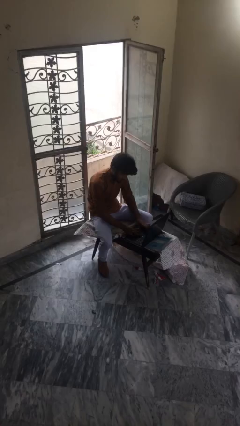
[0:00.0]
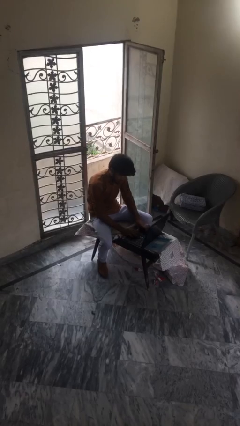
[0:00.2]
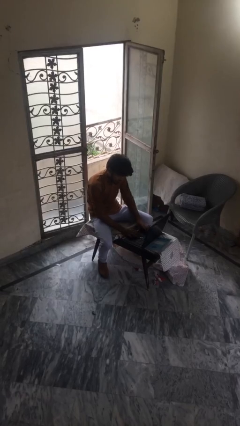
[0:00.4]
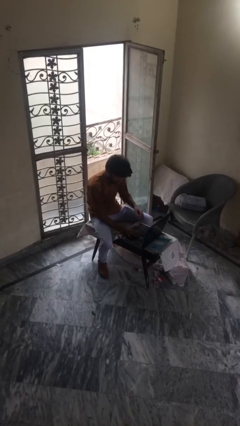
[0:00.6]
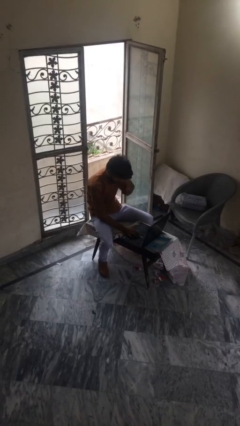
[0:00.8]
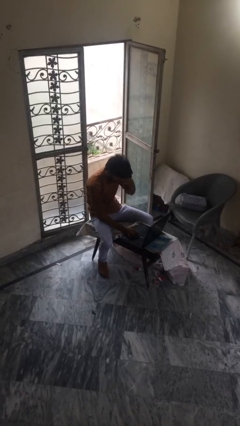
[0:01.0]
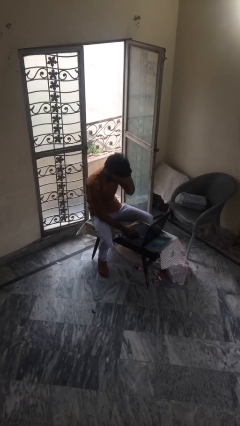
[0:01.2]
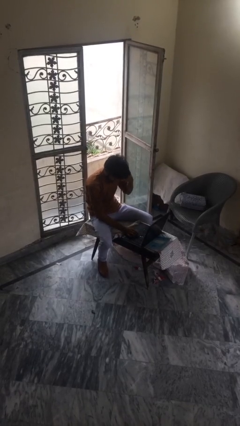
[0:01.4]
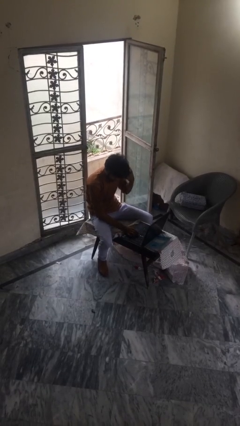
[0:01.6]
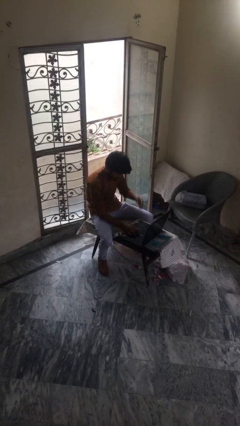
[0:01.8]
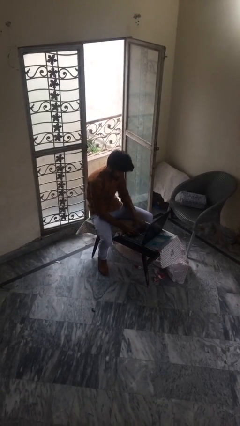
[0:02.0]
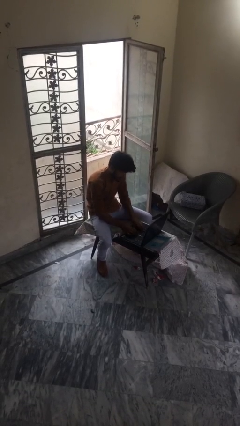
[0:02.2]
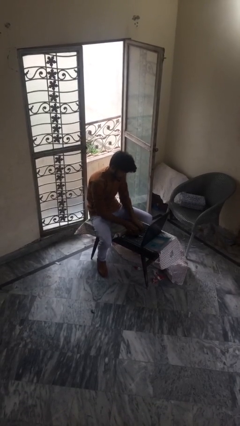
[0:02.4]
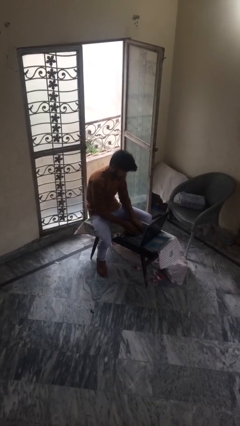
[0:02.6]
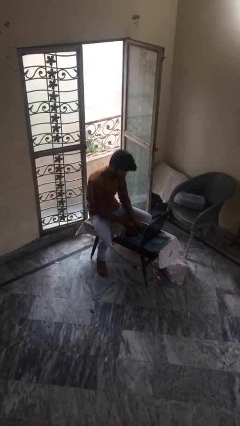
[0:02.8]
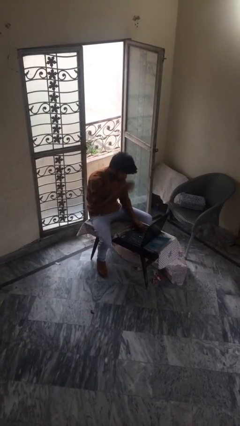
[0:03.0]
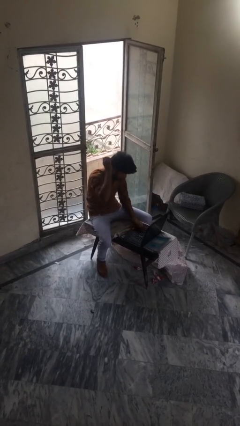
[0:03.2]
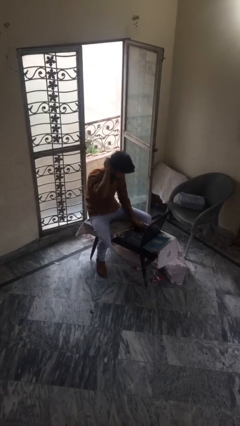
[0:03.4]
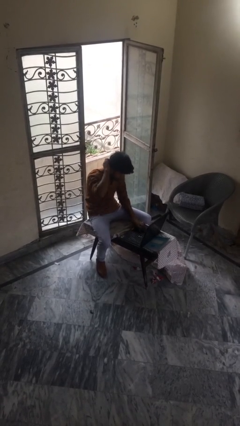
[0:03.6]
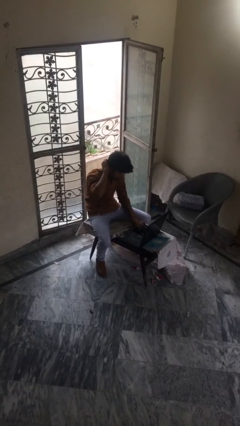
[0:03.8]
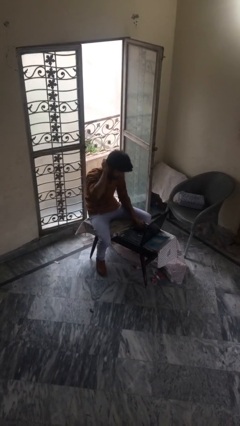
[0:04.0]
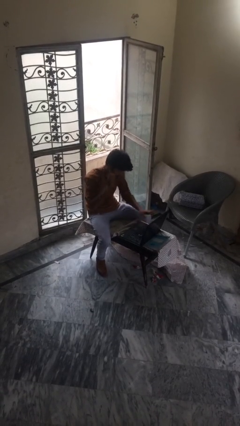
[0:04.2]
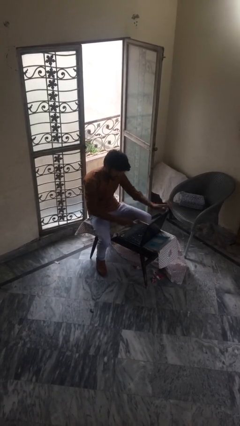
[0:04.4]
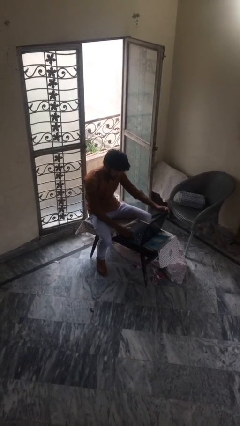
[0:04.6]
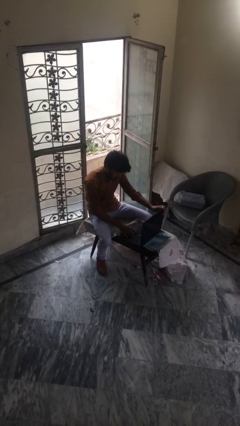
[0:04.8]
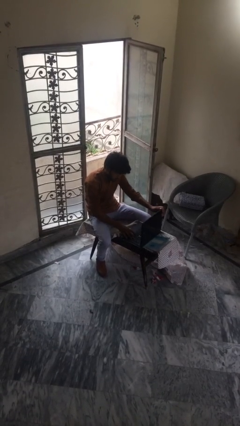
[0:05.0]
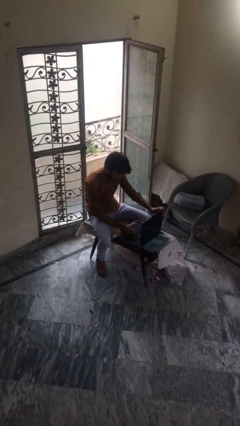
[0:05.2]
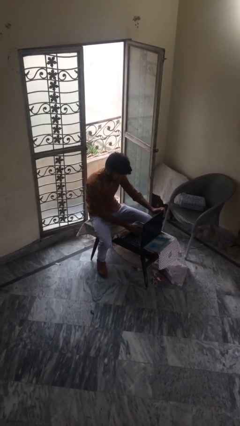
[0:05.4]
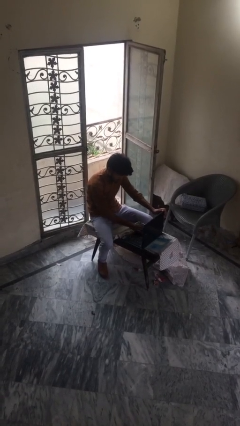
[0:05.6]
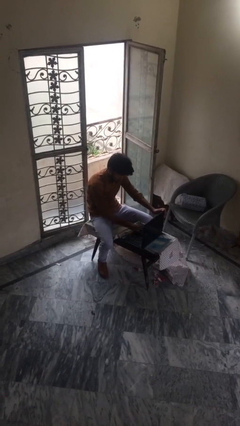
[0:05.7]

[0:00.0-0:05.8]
person interacts with laptop

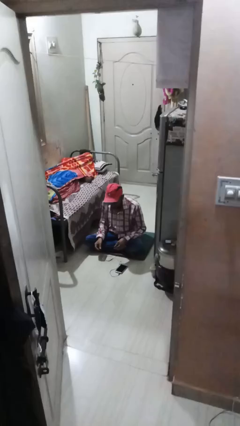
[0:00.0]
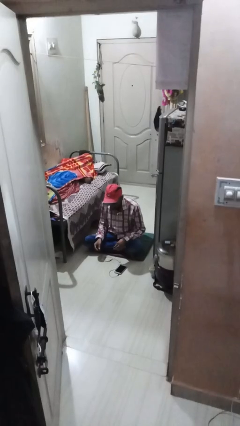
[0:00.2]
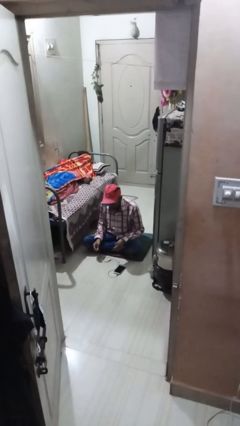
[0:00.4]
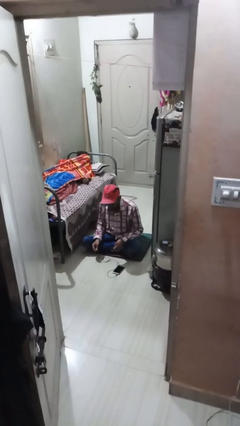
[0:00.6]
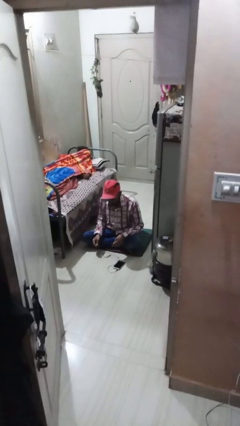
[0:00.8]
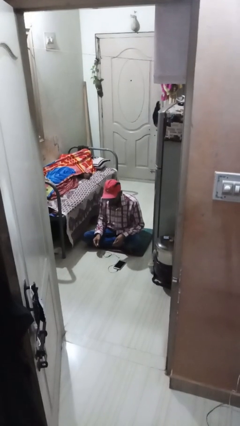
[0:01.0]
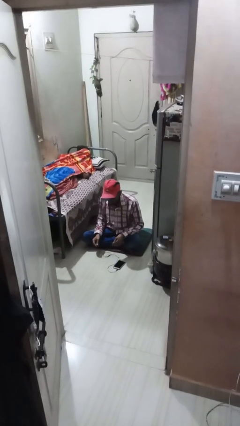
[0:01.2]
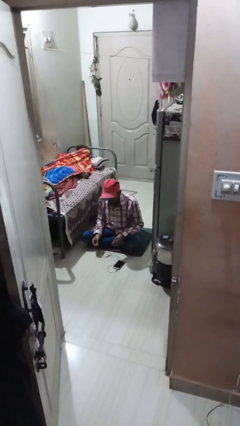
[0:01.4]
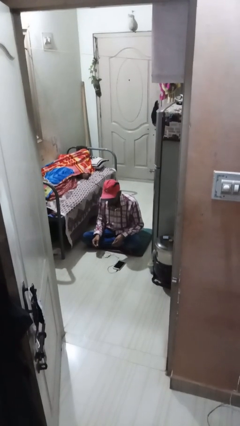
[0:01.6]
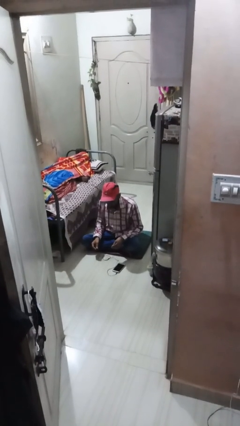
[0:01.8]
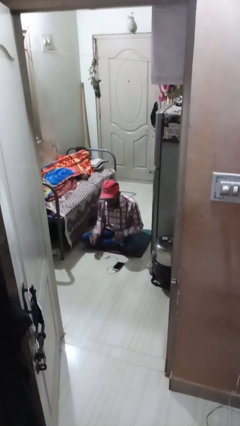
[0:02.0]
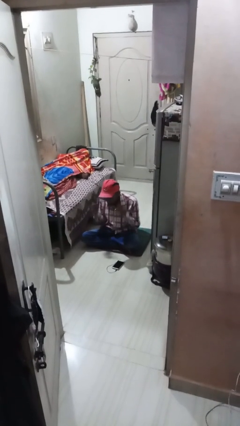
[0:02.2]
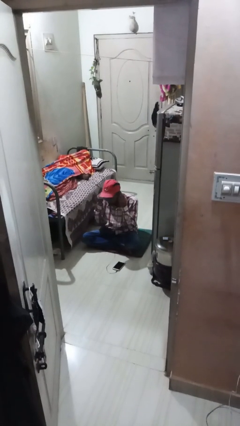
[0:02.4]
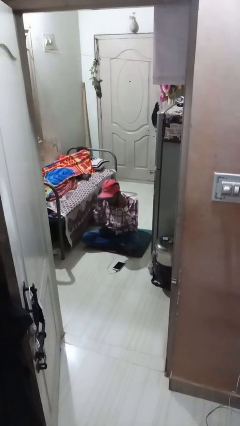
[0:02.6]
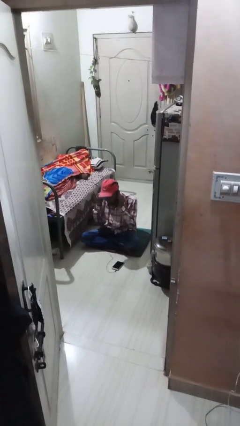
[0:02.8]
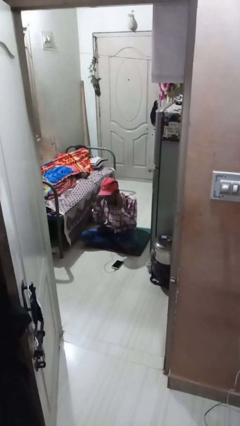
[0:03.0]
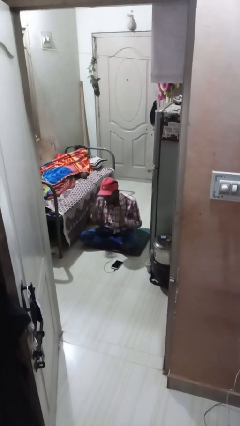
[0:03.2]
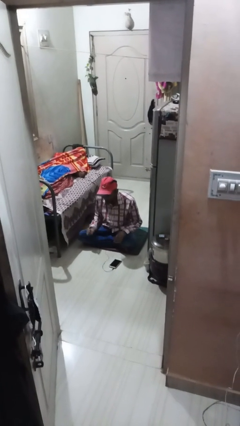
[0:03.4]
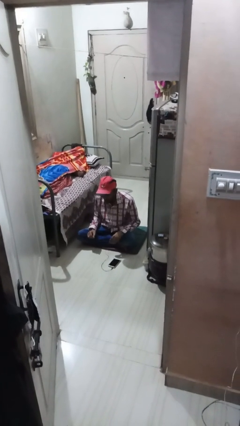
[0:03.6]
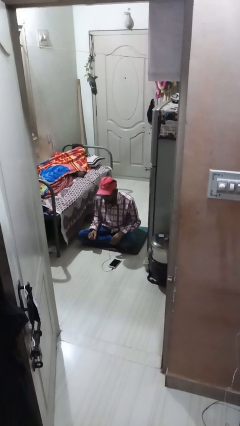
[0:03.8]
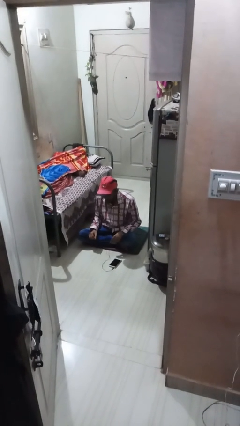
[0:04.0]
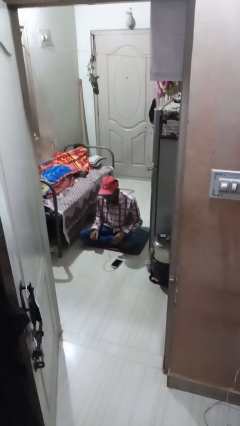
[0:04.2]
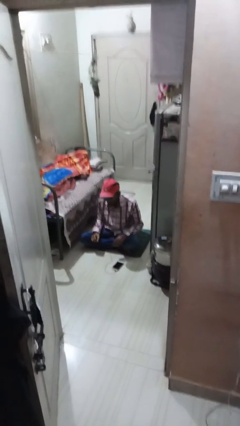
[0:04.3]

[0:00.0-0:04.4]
person puts on headphones

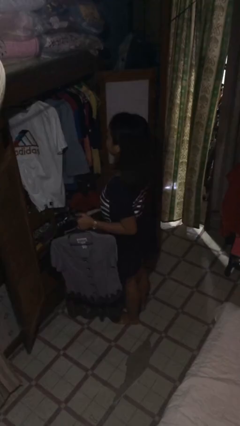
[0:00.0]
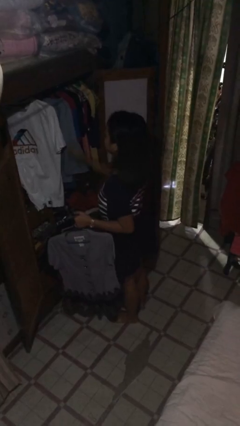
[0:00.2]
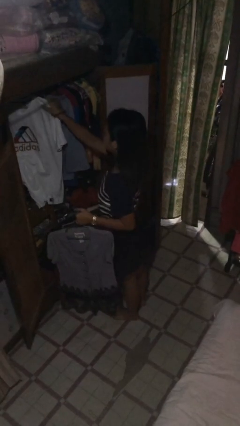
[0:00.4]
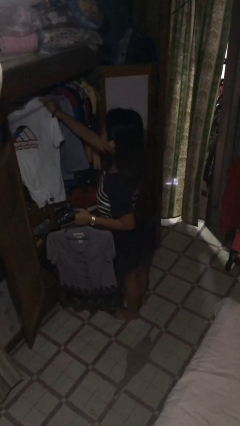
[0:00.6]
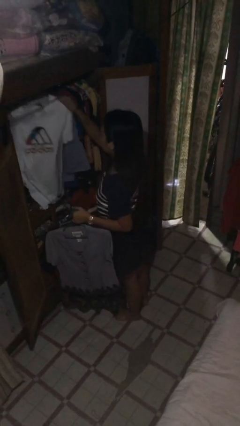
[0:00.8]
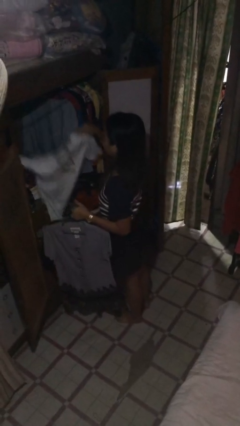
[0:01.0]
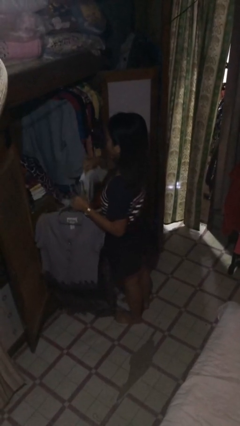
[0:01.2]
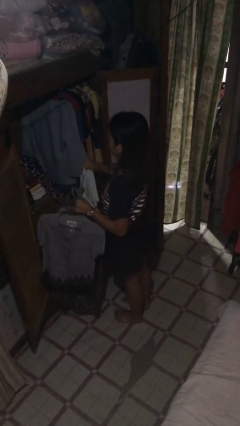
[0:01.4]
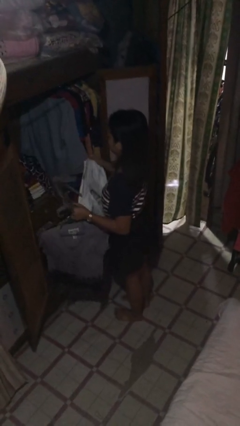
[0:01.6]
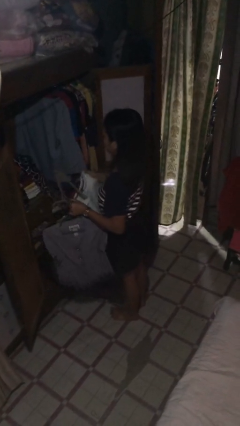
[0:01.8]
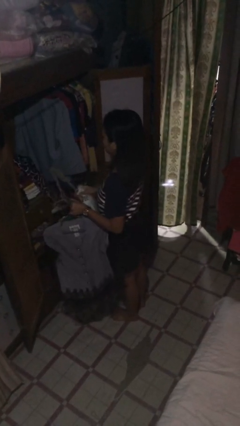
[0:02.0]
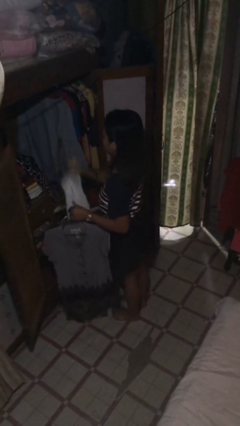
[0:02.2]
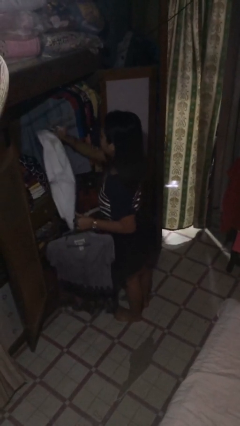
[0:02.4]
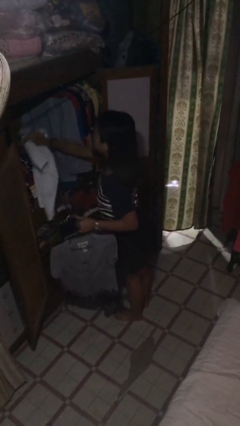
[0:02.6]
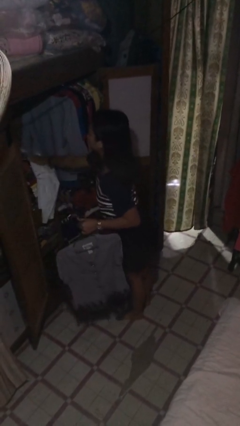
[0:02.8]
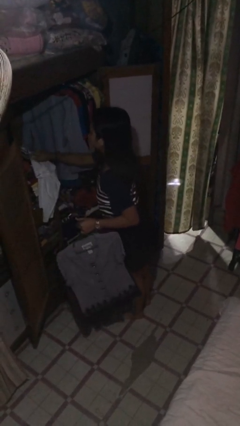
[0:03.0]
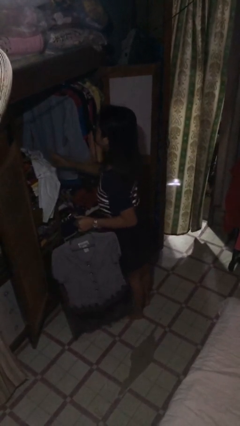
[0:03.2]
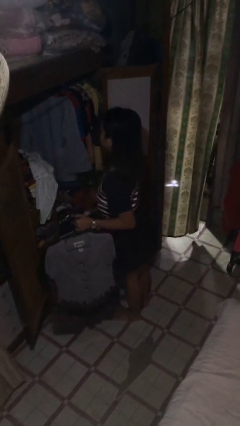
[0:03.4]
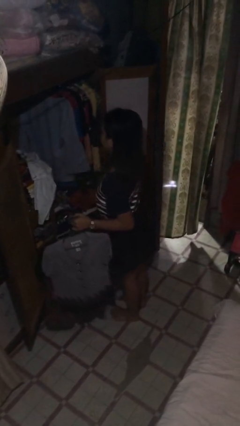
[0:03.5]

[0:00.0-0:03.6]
person takes clothes from closet

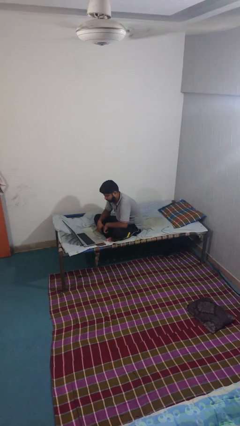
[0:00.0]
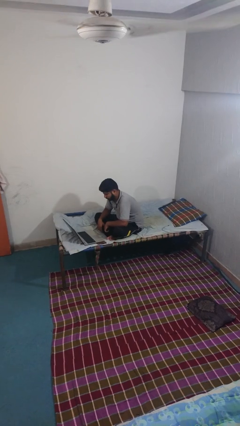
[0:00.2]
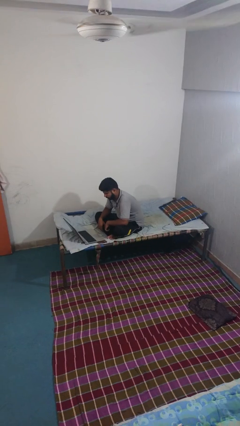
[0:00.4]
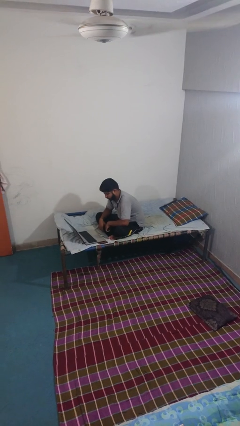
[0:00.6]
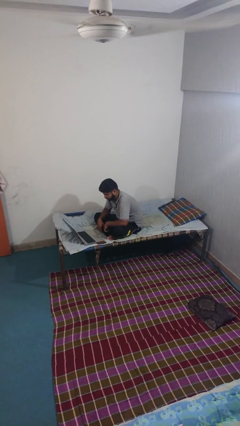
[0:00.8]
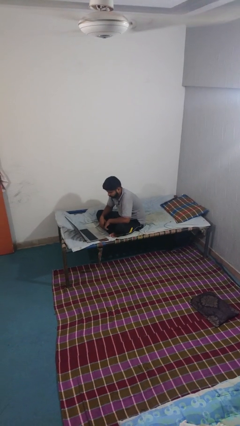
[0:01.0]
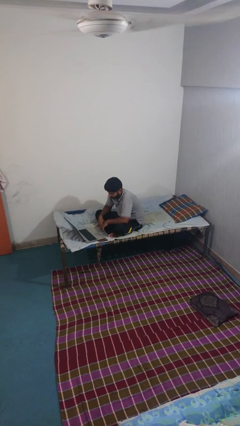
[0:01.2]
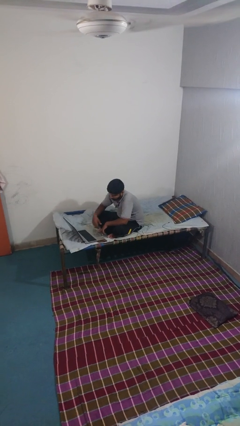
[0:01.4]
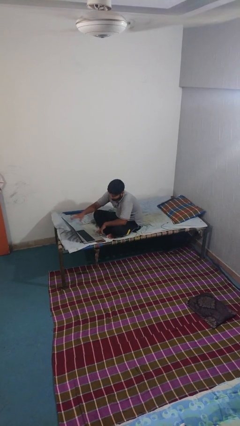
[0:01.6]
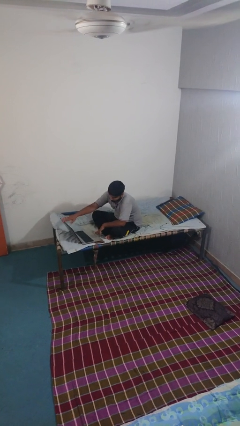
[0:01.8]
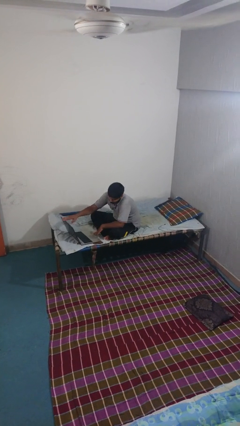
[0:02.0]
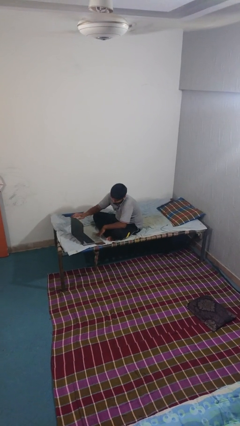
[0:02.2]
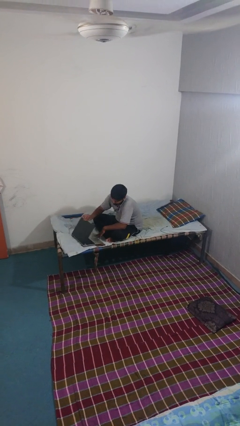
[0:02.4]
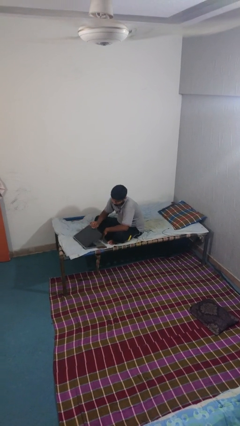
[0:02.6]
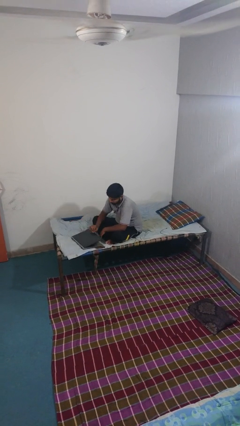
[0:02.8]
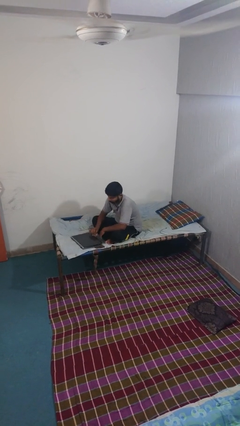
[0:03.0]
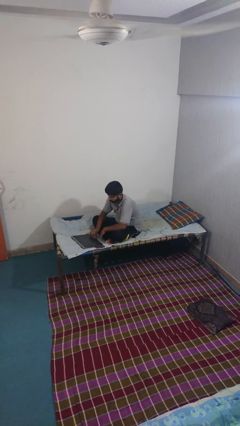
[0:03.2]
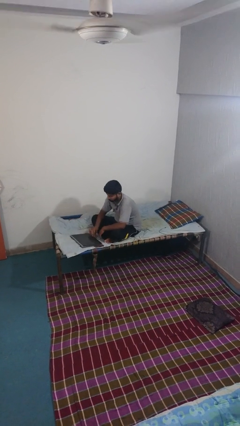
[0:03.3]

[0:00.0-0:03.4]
person closes laptop

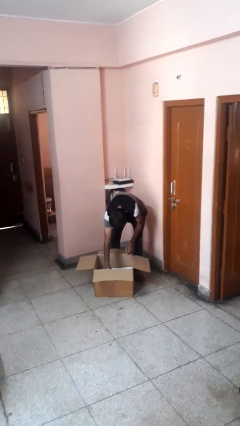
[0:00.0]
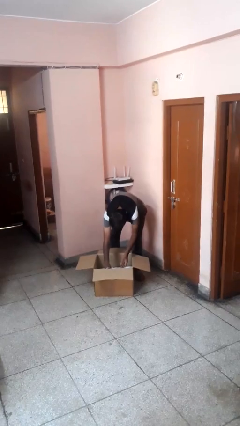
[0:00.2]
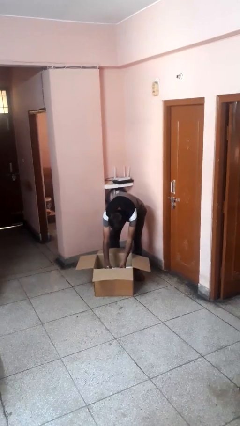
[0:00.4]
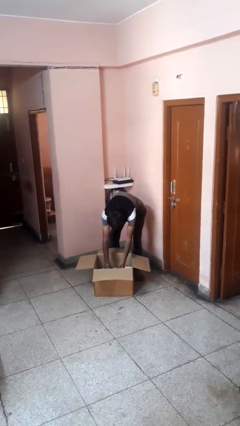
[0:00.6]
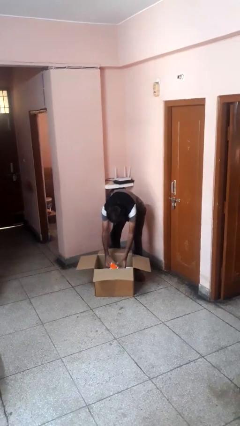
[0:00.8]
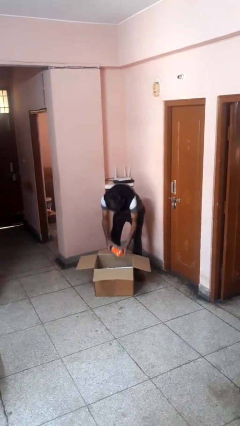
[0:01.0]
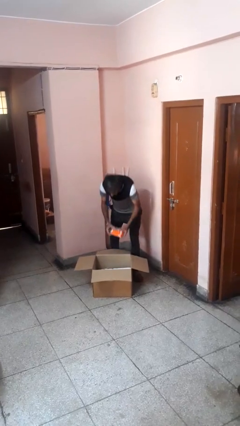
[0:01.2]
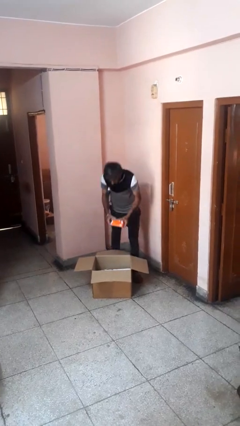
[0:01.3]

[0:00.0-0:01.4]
person takes object from box
